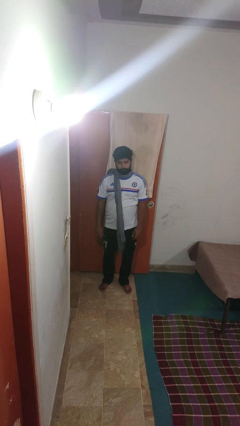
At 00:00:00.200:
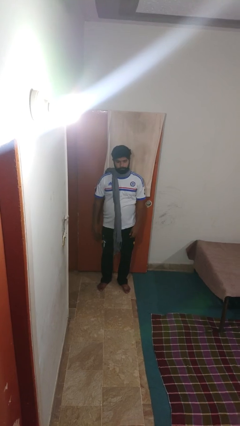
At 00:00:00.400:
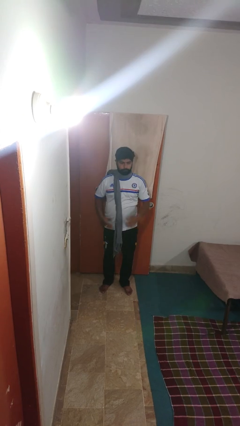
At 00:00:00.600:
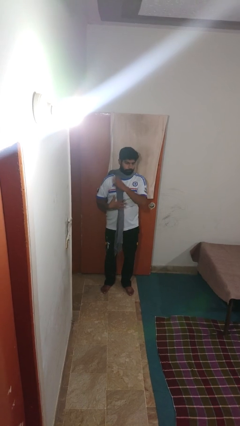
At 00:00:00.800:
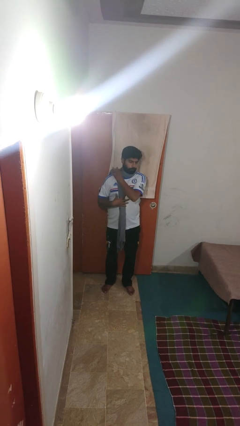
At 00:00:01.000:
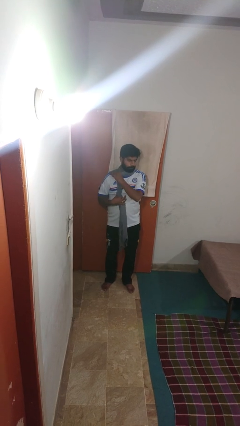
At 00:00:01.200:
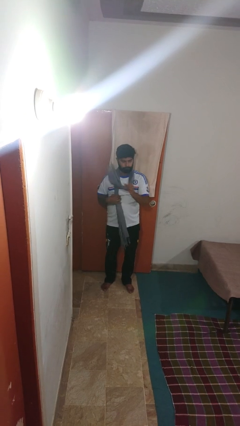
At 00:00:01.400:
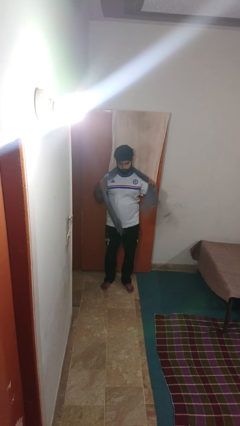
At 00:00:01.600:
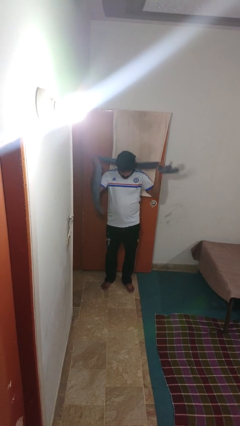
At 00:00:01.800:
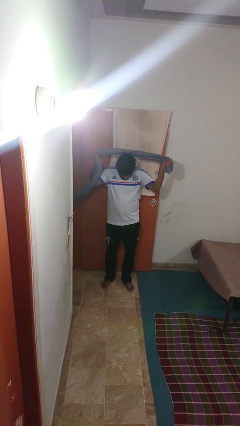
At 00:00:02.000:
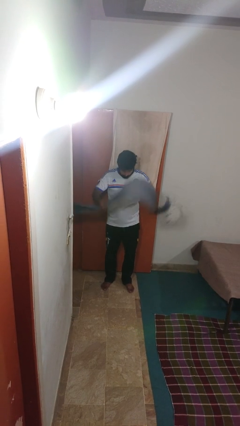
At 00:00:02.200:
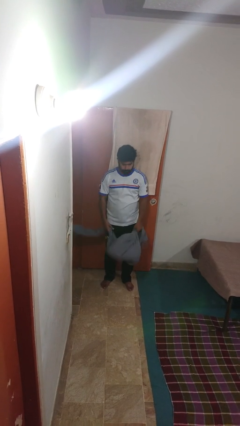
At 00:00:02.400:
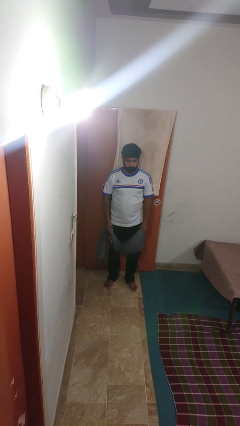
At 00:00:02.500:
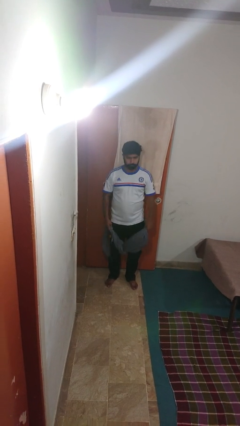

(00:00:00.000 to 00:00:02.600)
person takes off scarf

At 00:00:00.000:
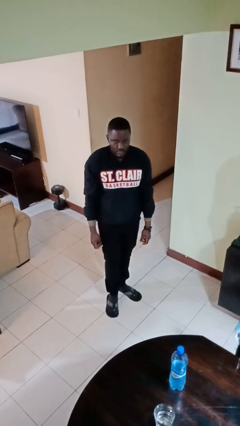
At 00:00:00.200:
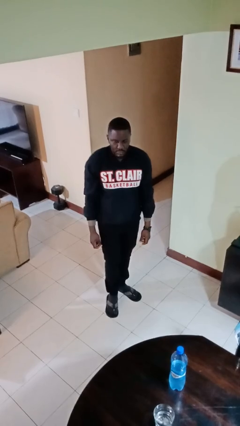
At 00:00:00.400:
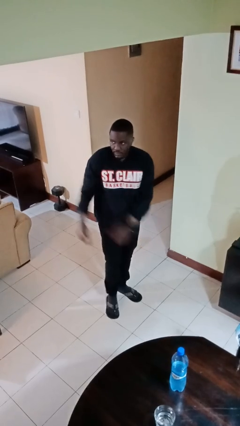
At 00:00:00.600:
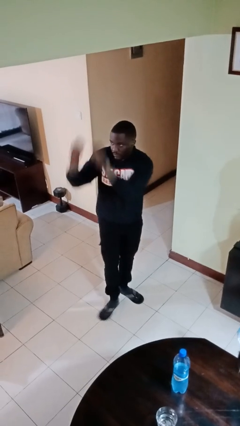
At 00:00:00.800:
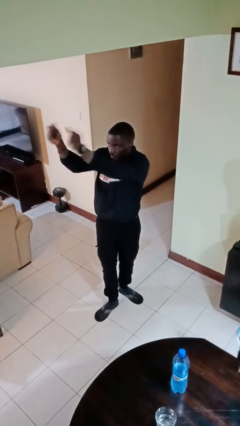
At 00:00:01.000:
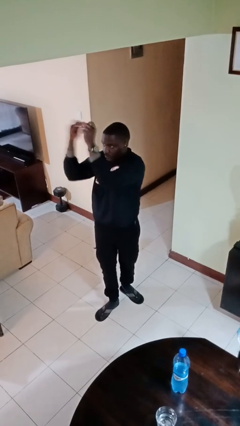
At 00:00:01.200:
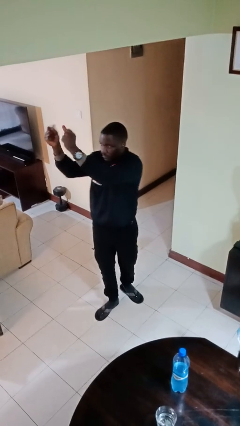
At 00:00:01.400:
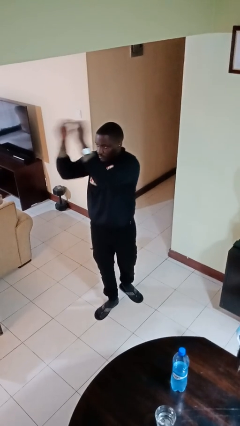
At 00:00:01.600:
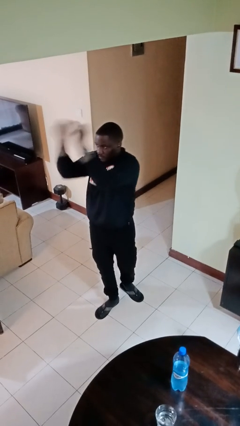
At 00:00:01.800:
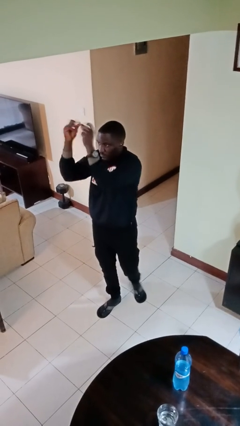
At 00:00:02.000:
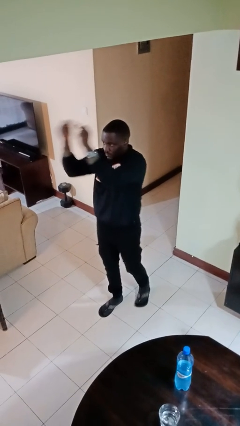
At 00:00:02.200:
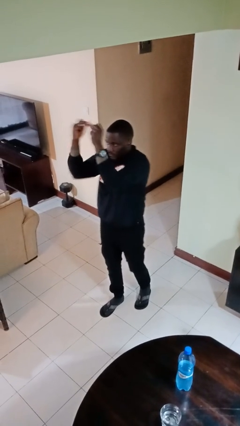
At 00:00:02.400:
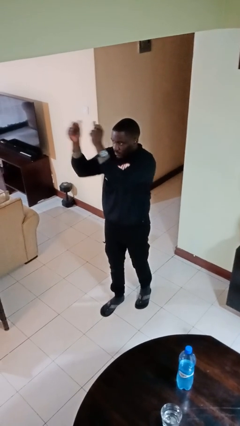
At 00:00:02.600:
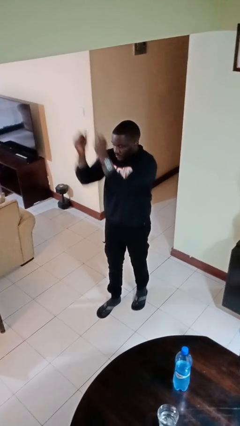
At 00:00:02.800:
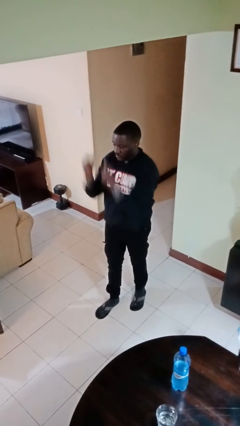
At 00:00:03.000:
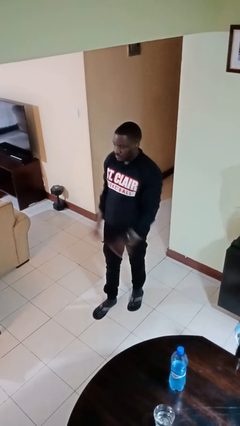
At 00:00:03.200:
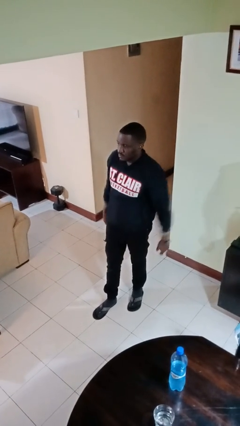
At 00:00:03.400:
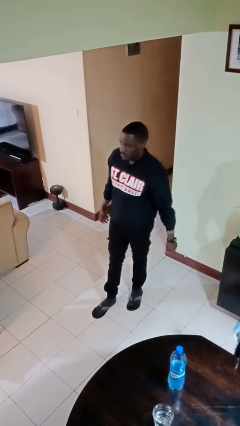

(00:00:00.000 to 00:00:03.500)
person snaps fingers

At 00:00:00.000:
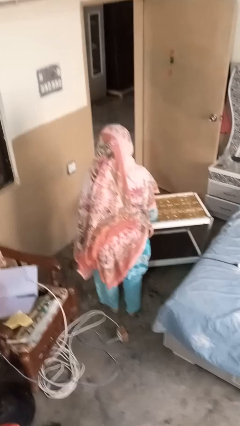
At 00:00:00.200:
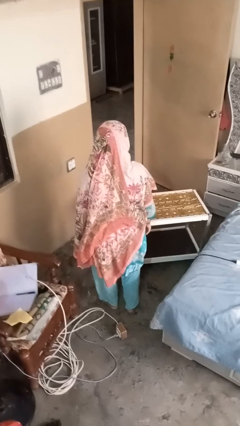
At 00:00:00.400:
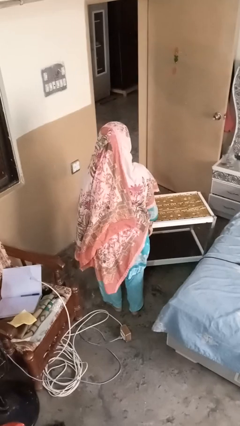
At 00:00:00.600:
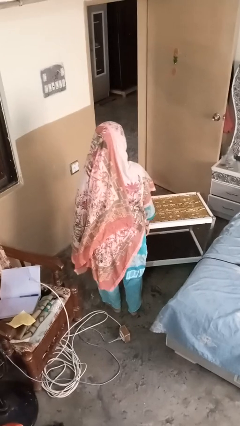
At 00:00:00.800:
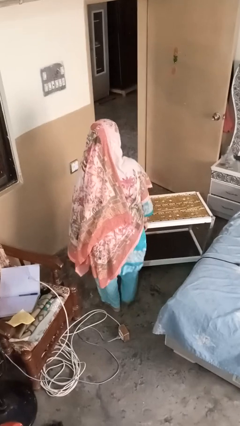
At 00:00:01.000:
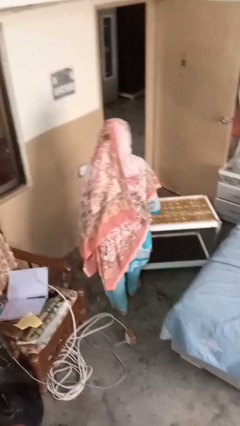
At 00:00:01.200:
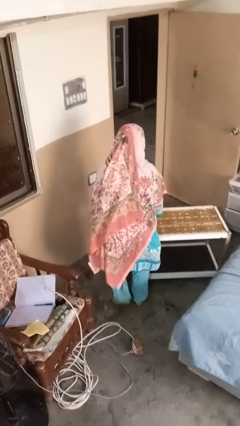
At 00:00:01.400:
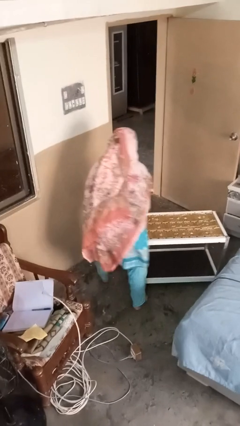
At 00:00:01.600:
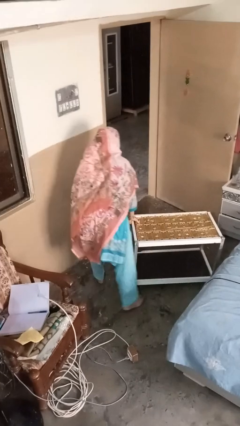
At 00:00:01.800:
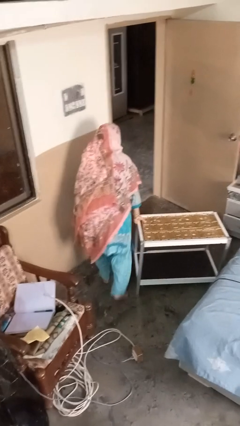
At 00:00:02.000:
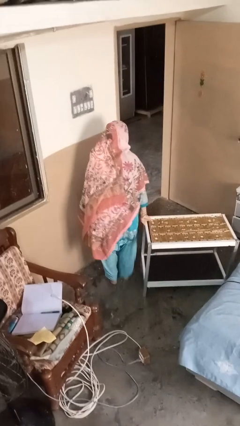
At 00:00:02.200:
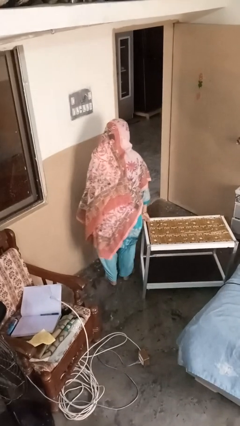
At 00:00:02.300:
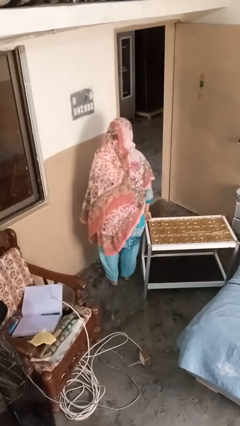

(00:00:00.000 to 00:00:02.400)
person bumps into table

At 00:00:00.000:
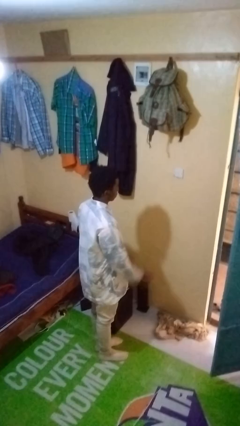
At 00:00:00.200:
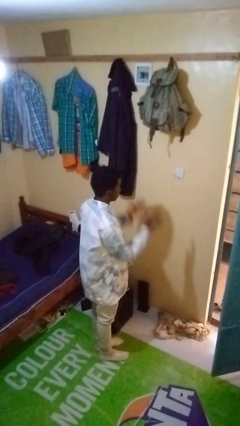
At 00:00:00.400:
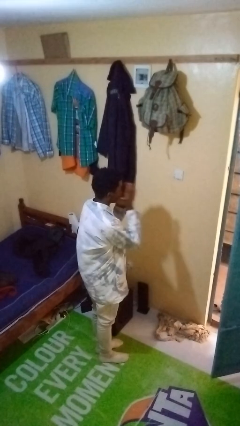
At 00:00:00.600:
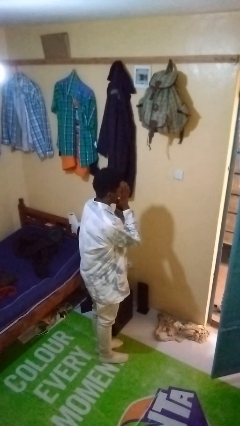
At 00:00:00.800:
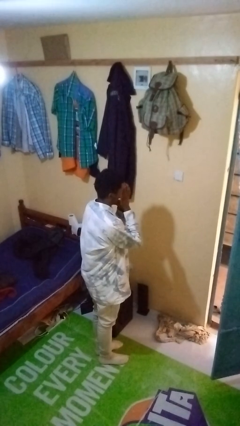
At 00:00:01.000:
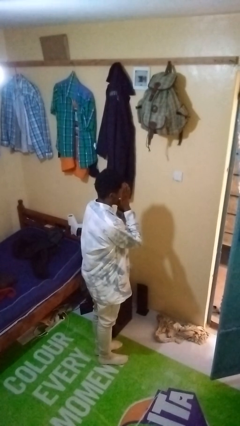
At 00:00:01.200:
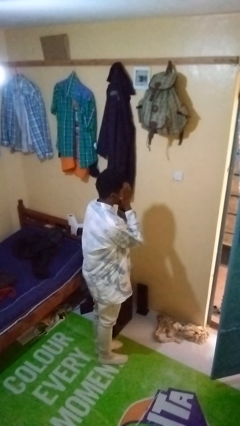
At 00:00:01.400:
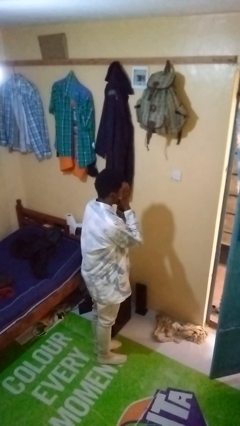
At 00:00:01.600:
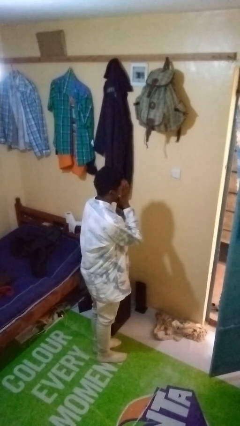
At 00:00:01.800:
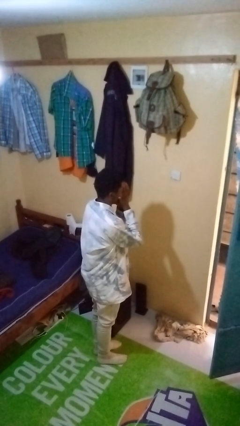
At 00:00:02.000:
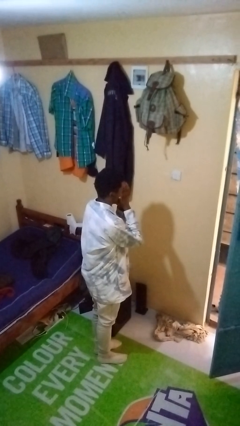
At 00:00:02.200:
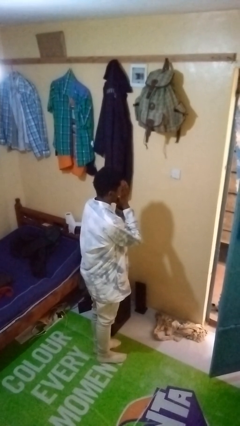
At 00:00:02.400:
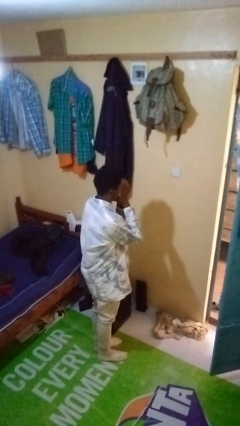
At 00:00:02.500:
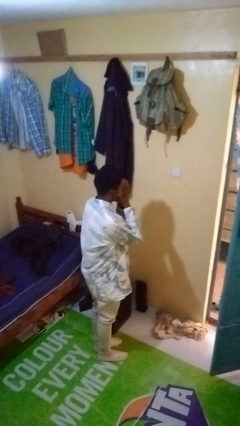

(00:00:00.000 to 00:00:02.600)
person covers face with hands

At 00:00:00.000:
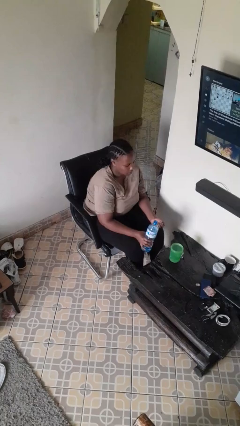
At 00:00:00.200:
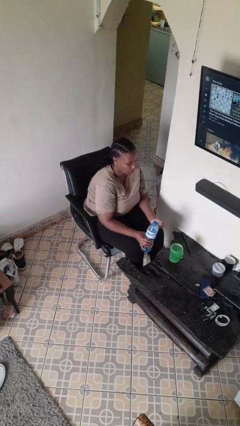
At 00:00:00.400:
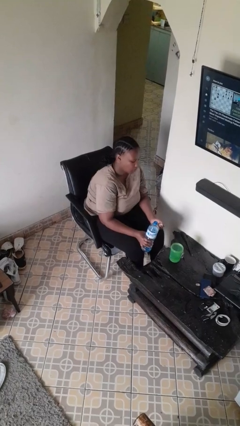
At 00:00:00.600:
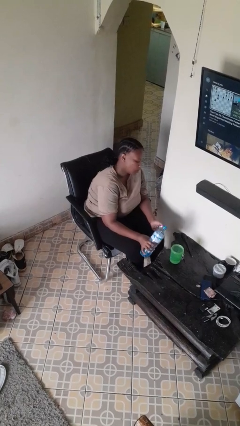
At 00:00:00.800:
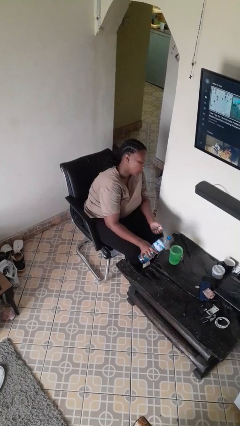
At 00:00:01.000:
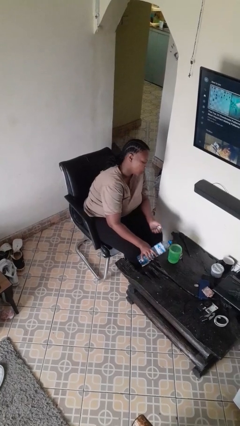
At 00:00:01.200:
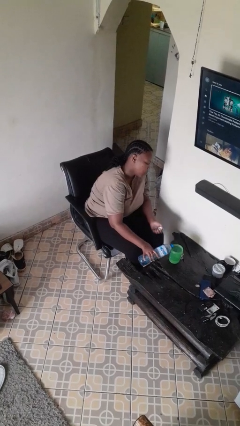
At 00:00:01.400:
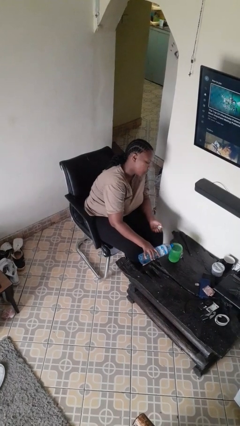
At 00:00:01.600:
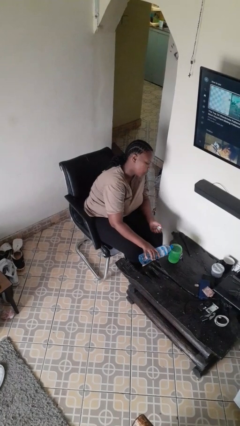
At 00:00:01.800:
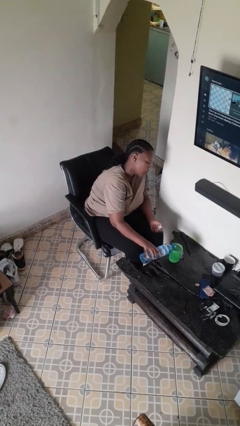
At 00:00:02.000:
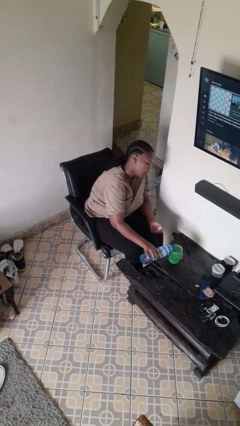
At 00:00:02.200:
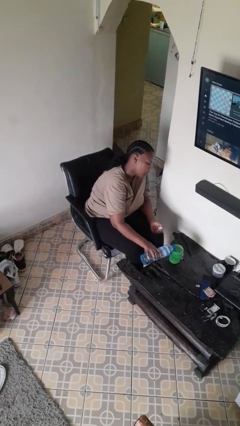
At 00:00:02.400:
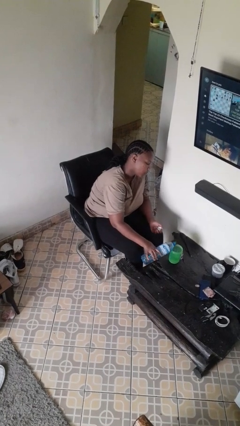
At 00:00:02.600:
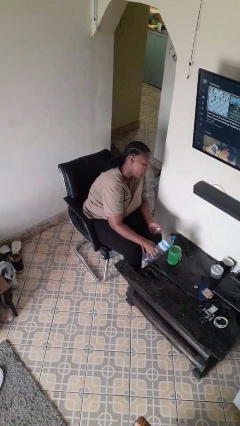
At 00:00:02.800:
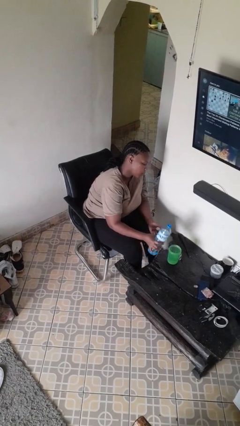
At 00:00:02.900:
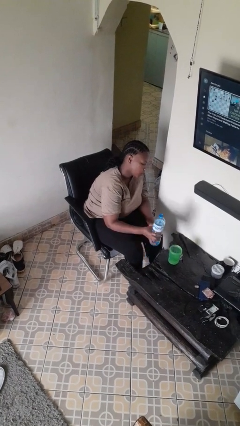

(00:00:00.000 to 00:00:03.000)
person pours liquid into cup

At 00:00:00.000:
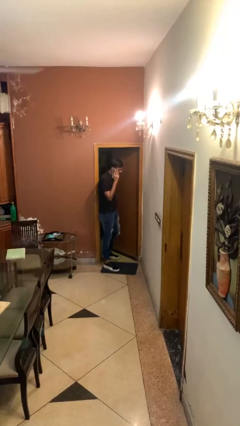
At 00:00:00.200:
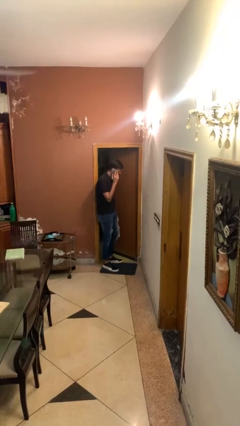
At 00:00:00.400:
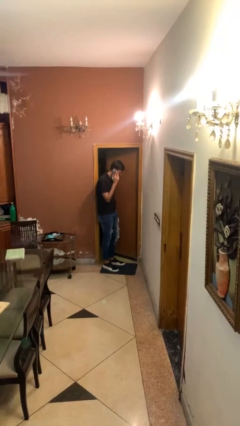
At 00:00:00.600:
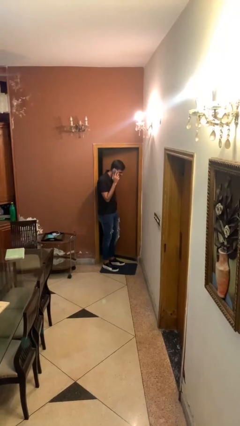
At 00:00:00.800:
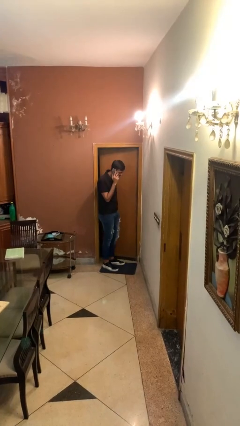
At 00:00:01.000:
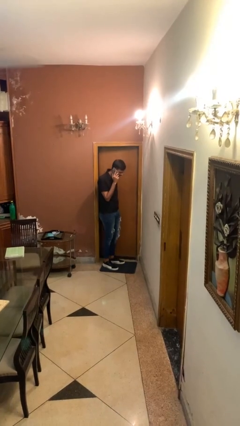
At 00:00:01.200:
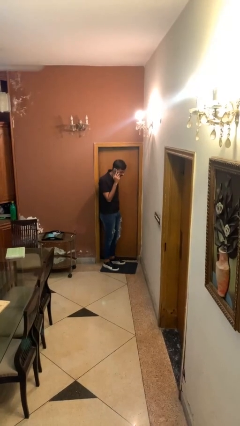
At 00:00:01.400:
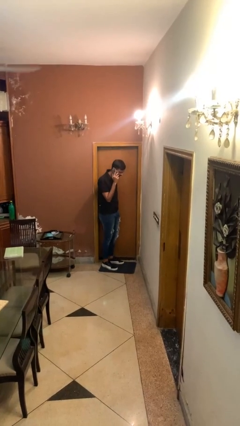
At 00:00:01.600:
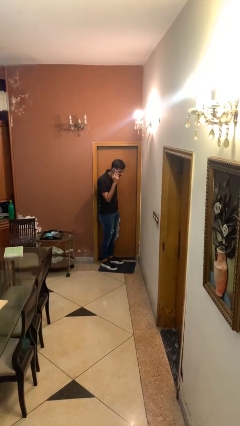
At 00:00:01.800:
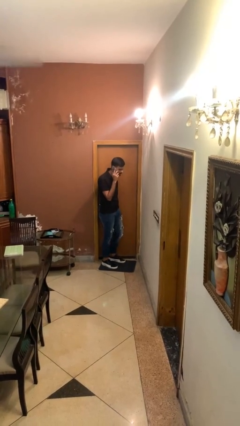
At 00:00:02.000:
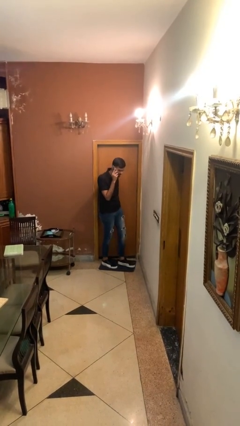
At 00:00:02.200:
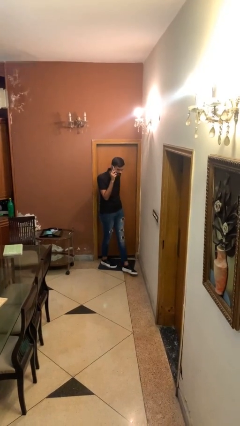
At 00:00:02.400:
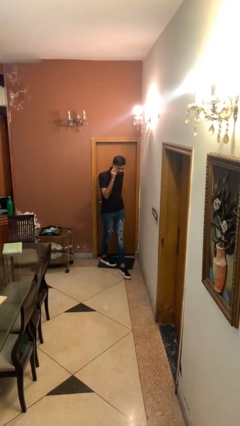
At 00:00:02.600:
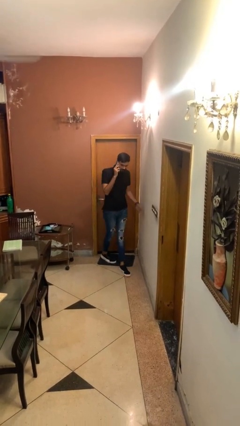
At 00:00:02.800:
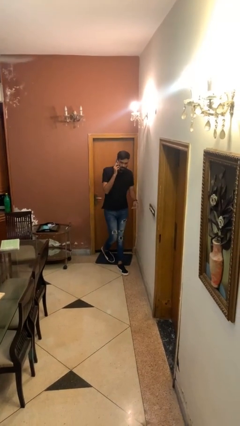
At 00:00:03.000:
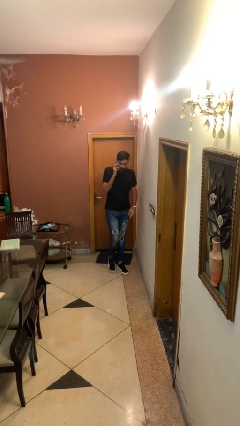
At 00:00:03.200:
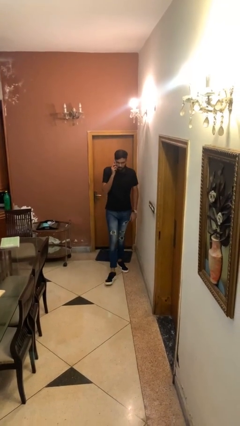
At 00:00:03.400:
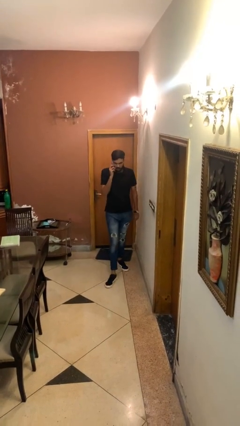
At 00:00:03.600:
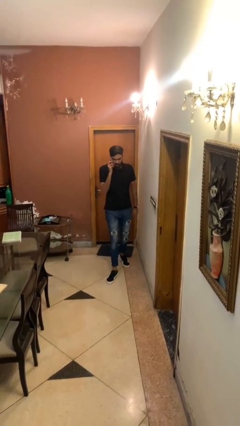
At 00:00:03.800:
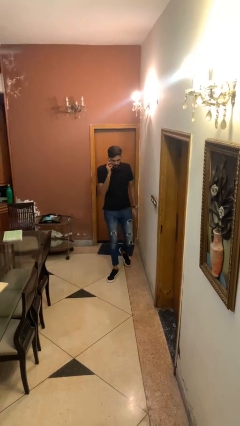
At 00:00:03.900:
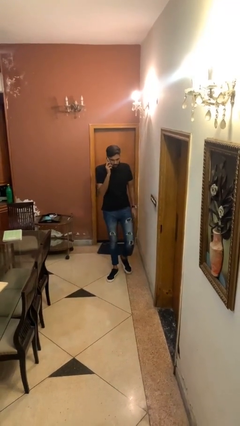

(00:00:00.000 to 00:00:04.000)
person closes facility door
